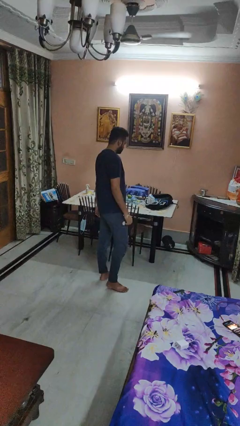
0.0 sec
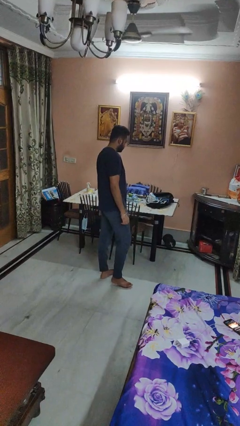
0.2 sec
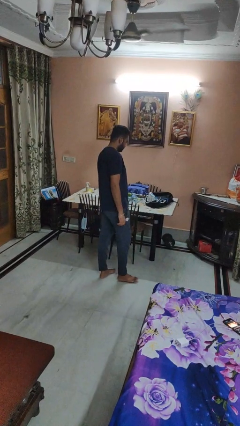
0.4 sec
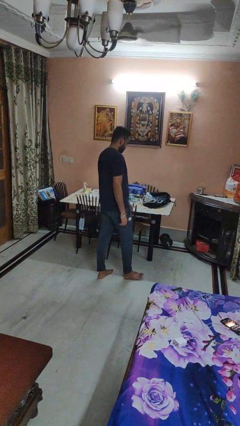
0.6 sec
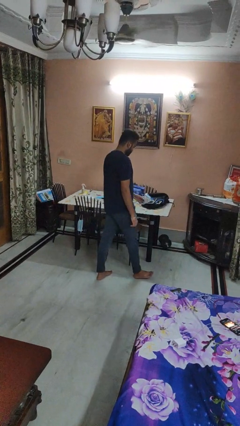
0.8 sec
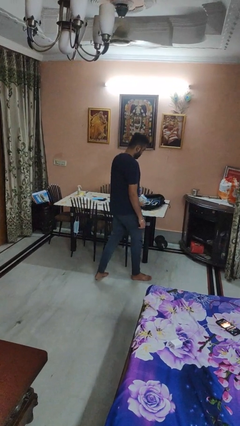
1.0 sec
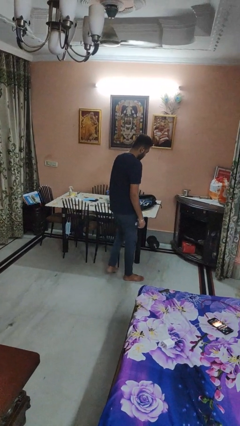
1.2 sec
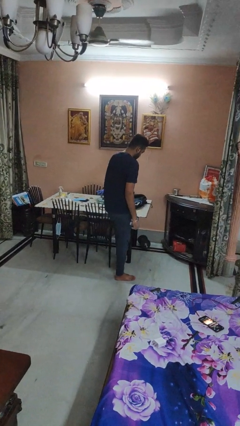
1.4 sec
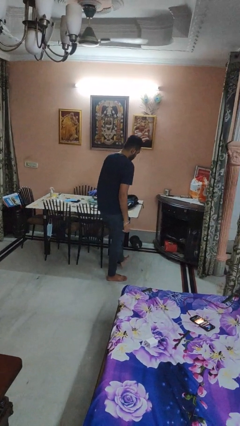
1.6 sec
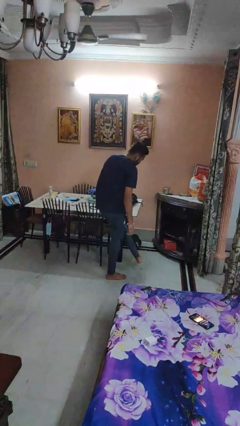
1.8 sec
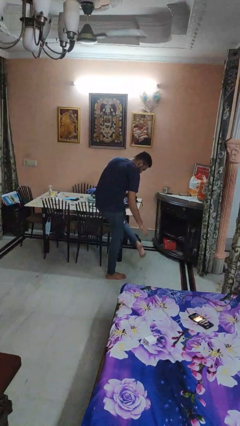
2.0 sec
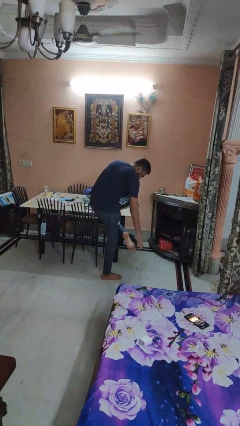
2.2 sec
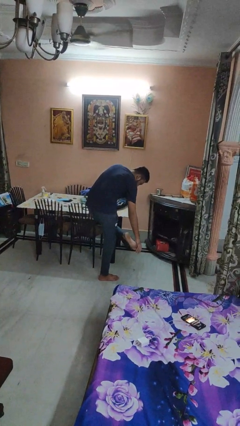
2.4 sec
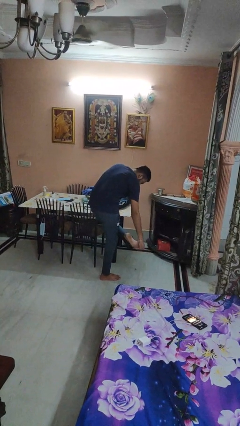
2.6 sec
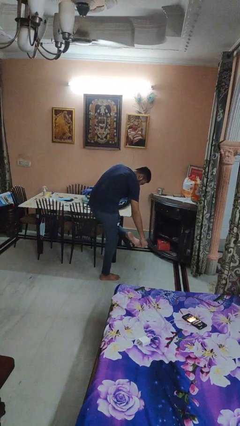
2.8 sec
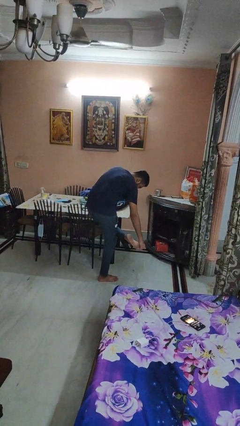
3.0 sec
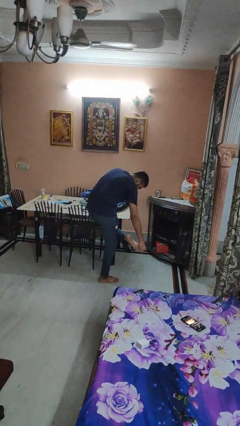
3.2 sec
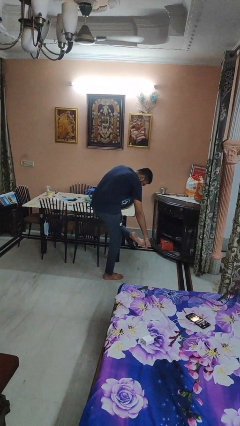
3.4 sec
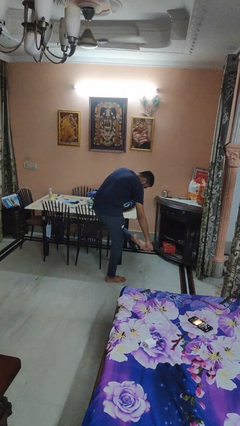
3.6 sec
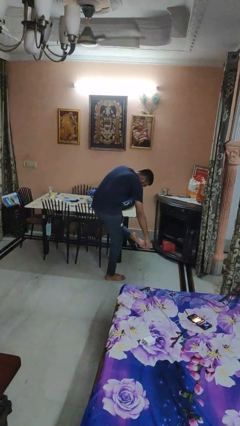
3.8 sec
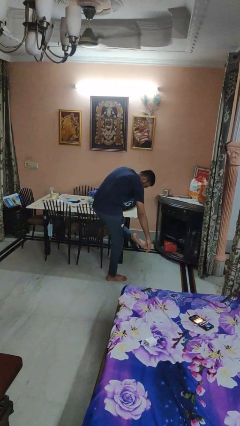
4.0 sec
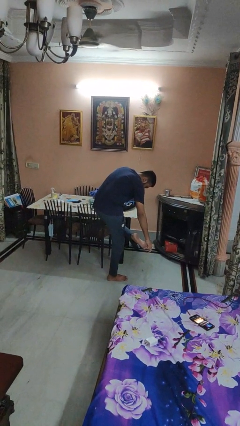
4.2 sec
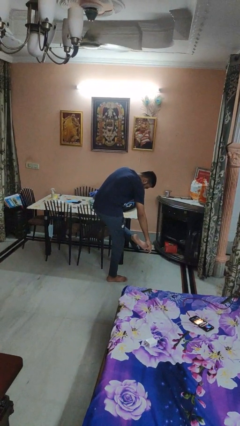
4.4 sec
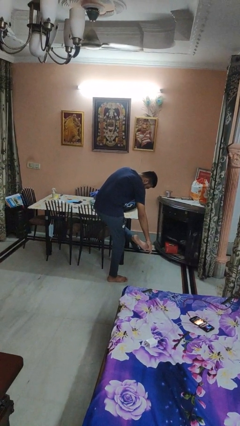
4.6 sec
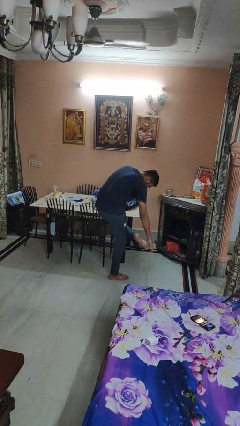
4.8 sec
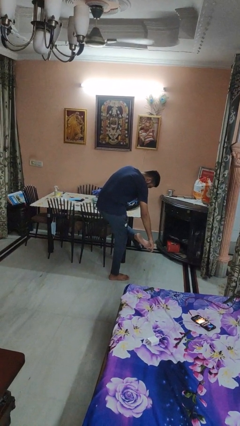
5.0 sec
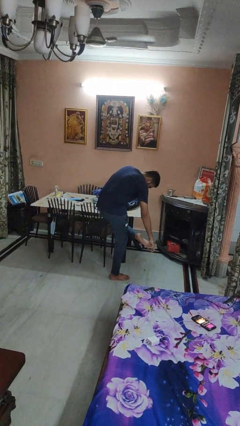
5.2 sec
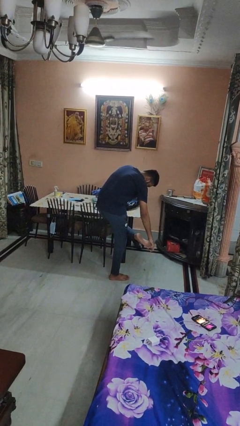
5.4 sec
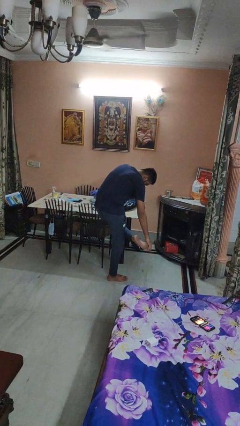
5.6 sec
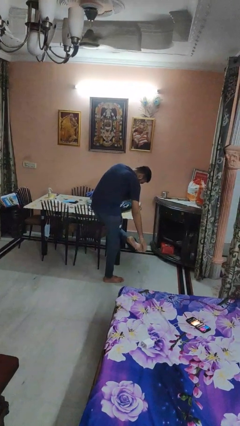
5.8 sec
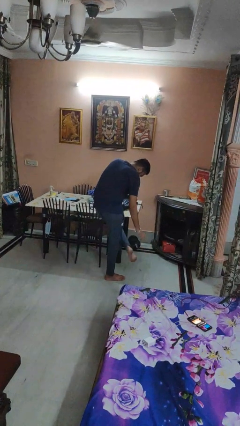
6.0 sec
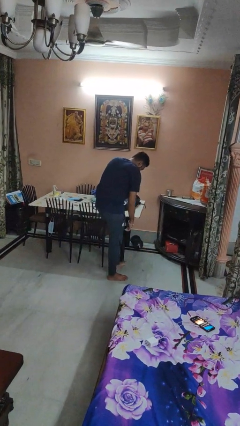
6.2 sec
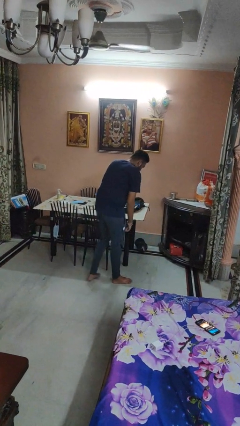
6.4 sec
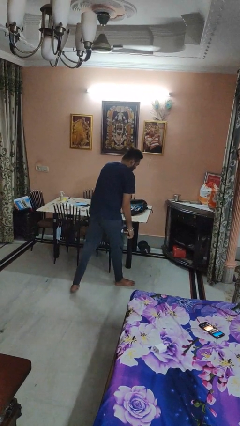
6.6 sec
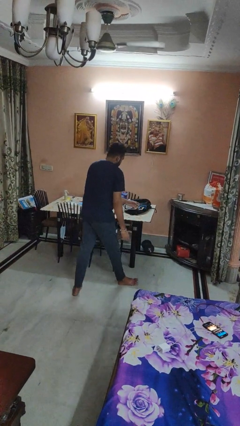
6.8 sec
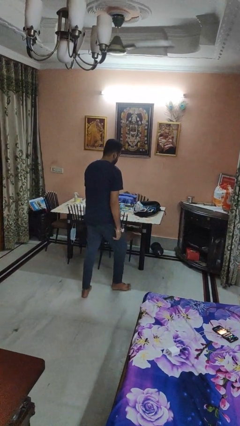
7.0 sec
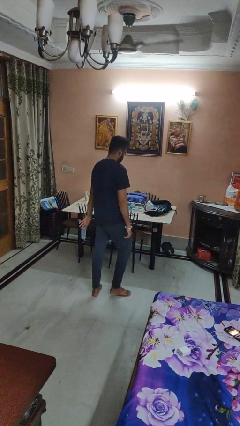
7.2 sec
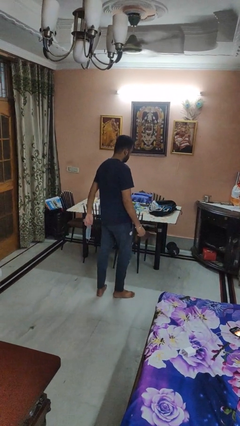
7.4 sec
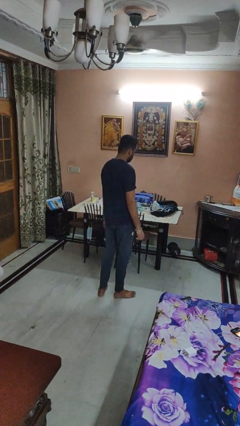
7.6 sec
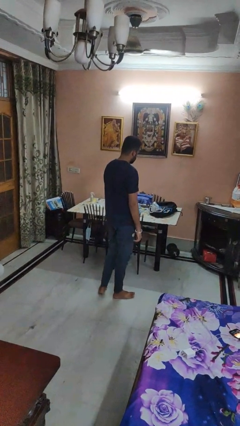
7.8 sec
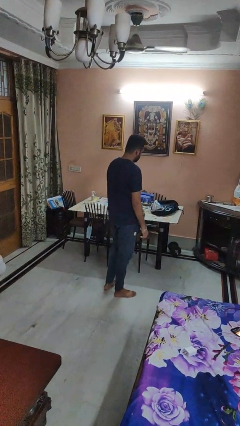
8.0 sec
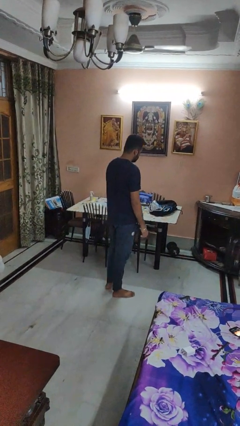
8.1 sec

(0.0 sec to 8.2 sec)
person bumps into table

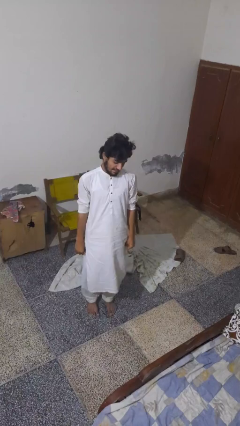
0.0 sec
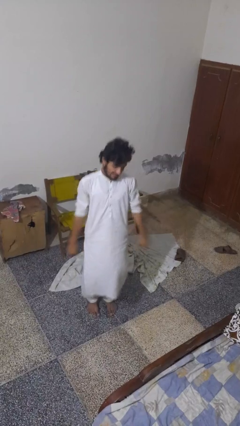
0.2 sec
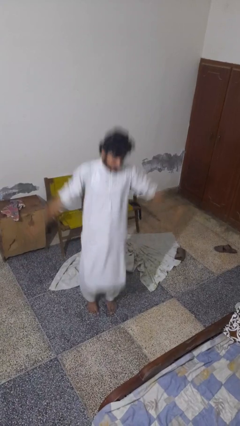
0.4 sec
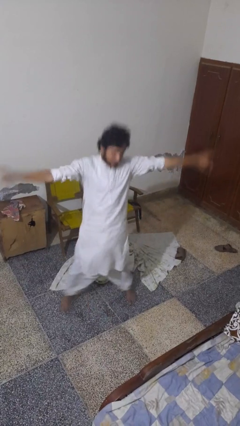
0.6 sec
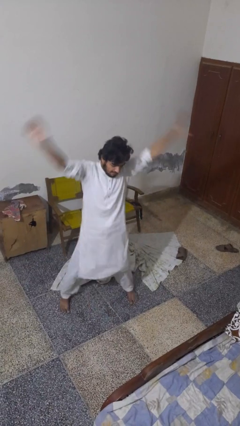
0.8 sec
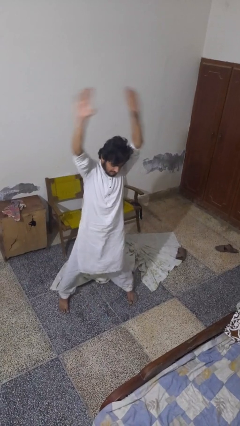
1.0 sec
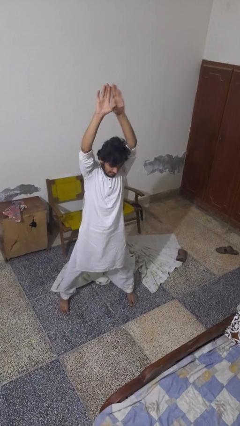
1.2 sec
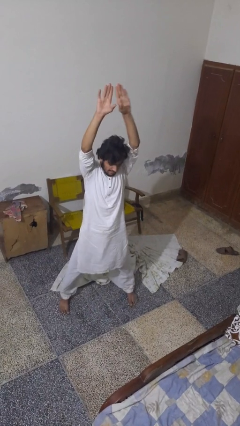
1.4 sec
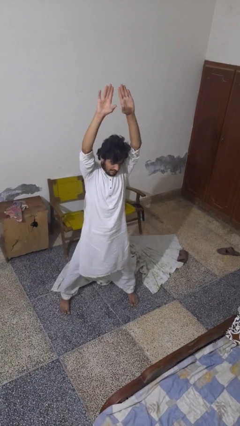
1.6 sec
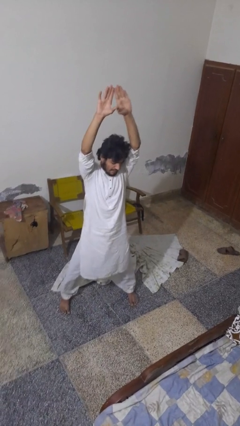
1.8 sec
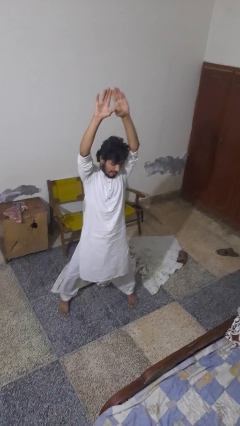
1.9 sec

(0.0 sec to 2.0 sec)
person exercises with jumping jacks

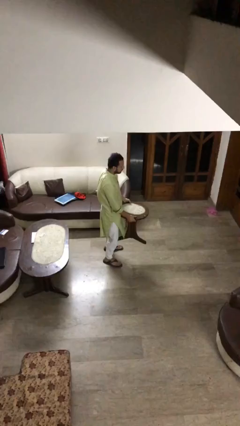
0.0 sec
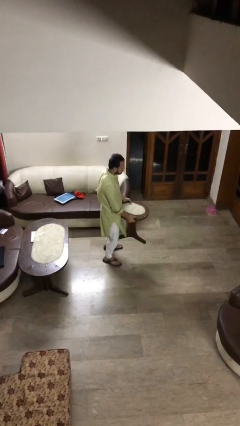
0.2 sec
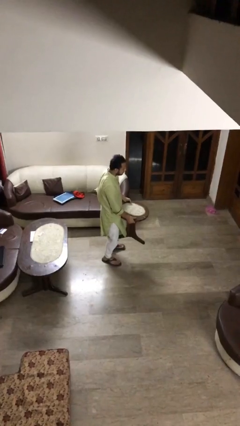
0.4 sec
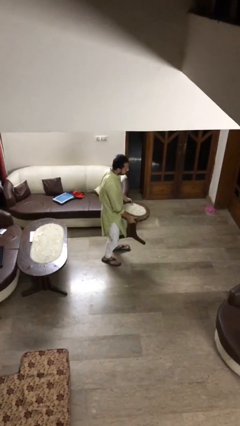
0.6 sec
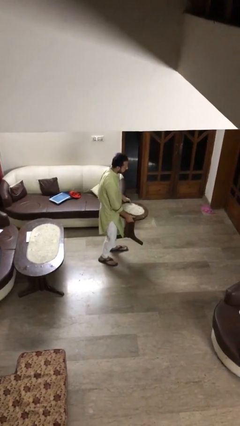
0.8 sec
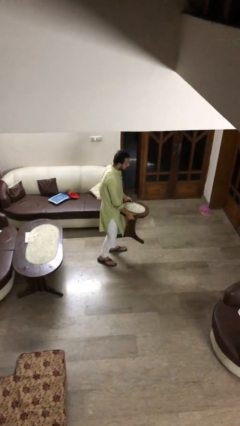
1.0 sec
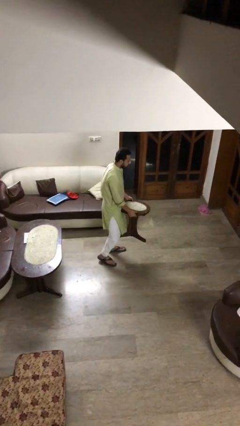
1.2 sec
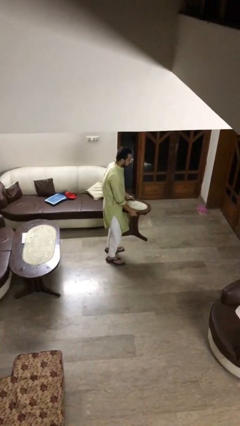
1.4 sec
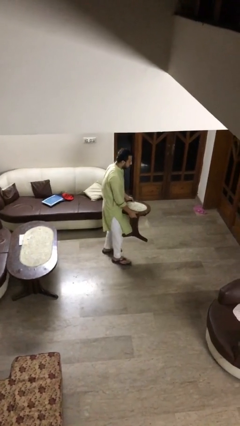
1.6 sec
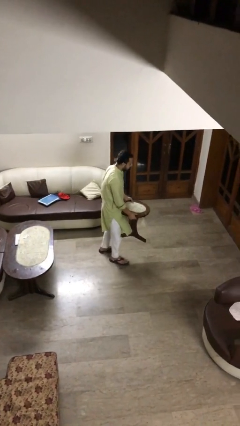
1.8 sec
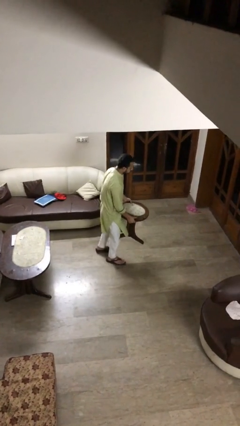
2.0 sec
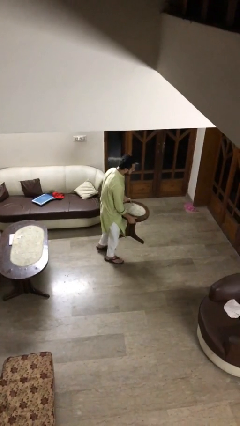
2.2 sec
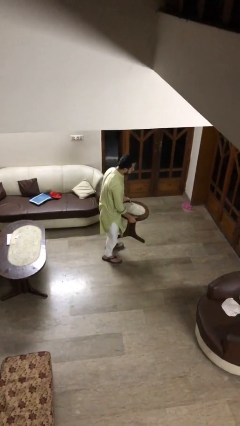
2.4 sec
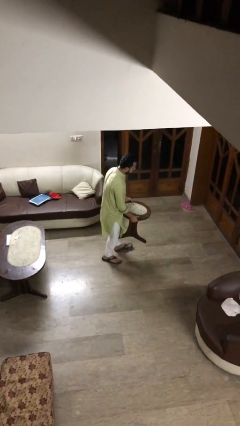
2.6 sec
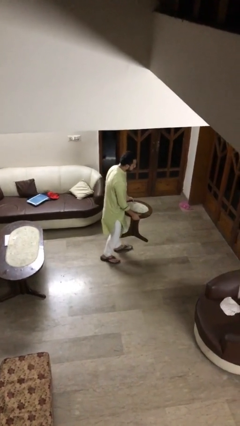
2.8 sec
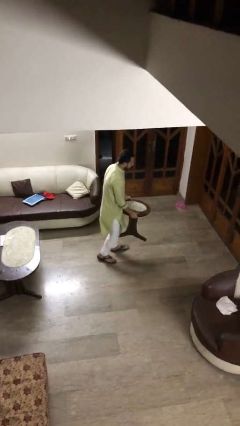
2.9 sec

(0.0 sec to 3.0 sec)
person carries heavy object

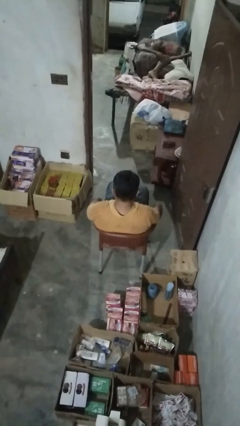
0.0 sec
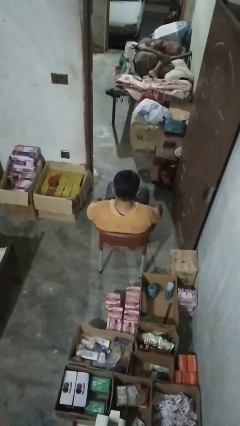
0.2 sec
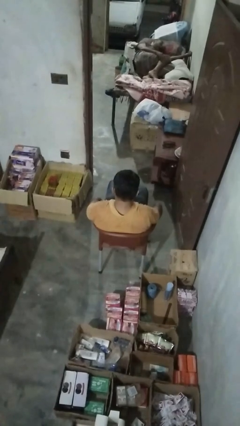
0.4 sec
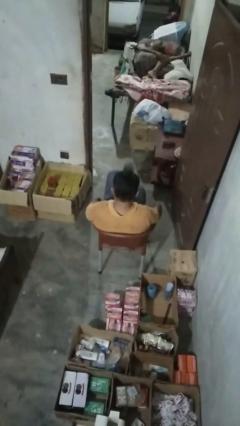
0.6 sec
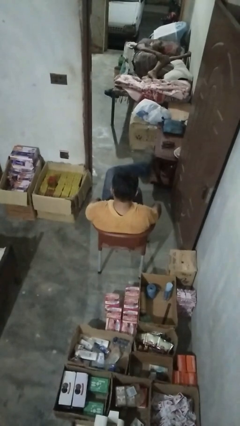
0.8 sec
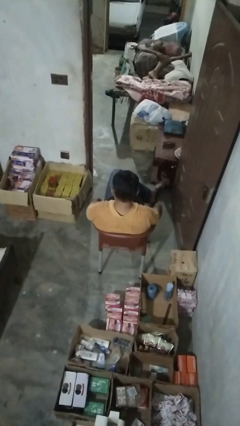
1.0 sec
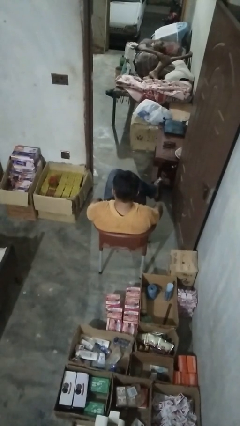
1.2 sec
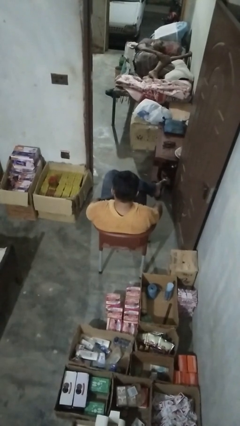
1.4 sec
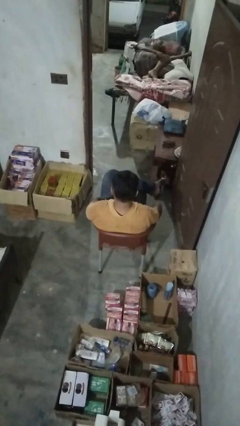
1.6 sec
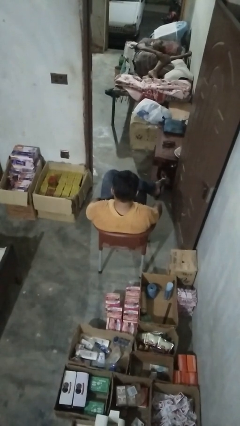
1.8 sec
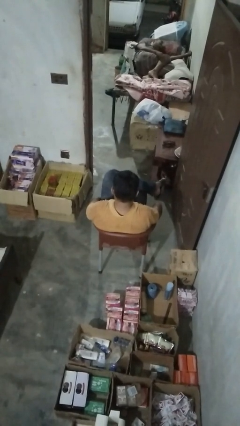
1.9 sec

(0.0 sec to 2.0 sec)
person crosses legs

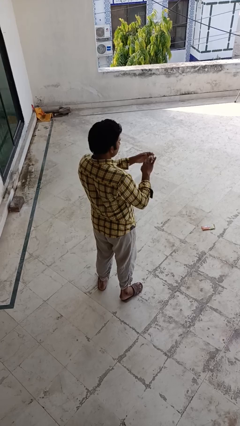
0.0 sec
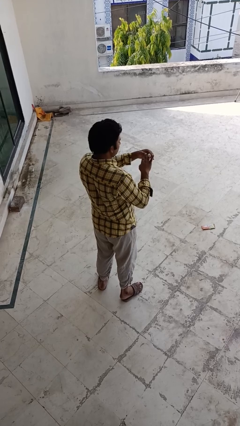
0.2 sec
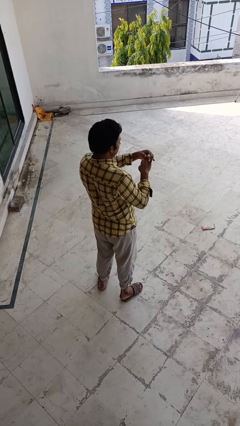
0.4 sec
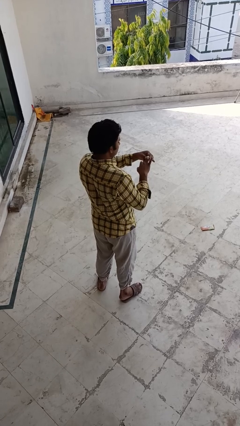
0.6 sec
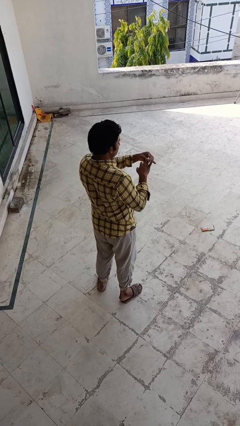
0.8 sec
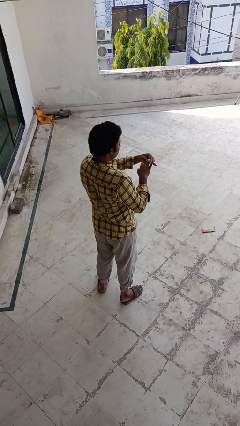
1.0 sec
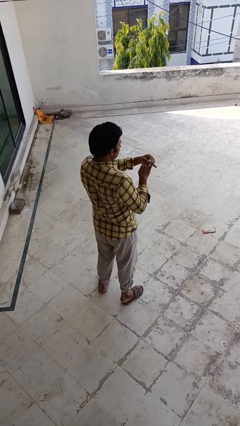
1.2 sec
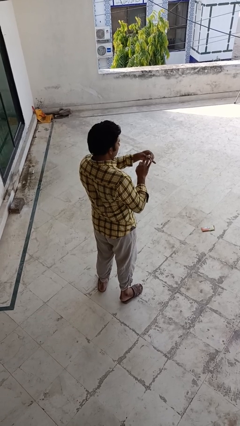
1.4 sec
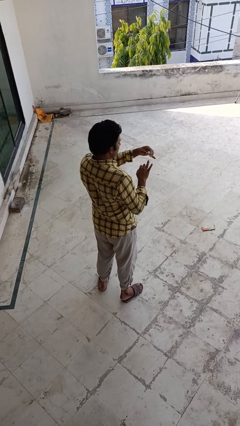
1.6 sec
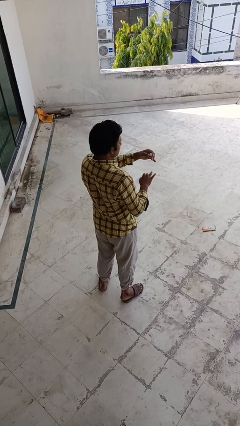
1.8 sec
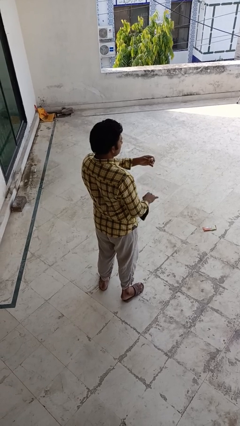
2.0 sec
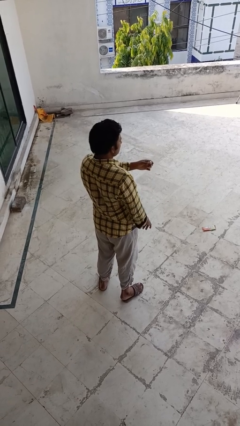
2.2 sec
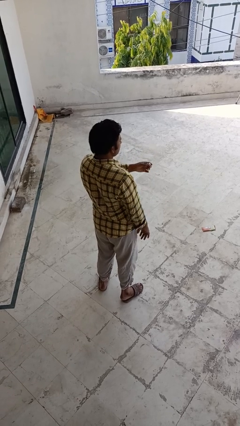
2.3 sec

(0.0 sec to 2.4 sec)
person takes off ring
